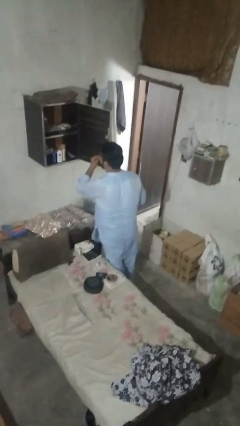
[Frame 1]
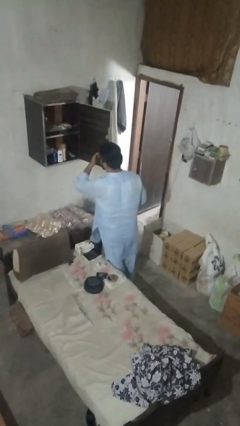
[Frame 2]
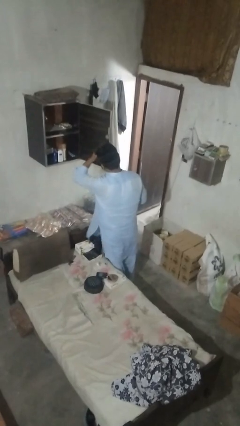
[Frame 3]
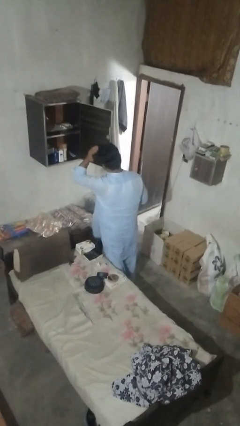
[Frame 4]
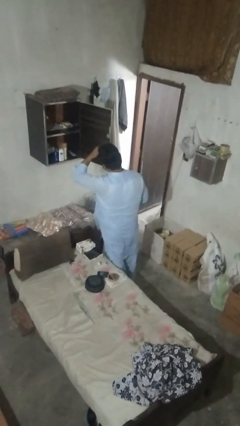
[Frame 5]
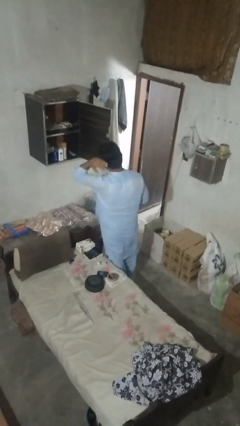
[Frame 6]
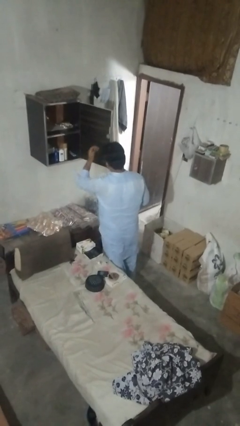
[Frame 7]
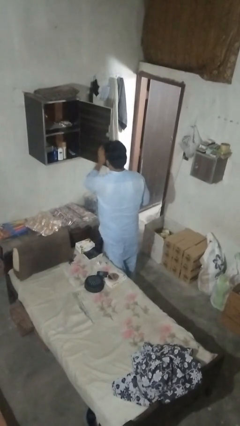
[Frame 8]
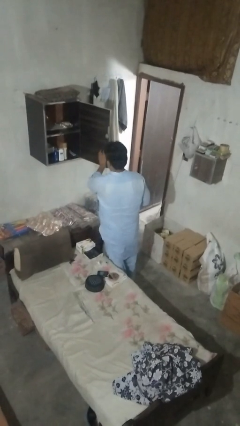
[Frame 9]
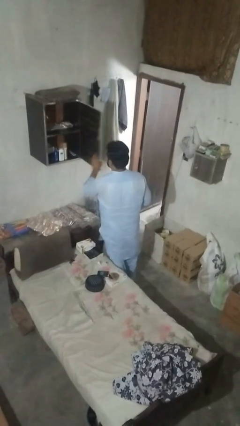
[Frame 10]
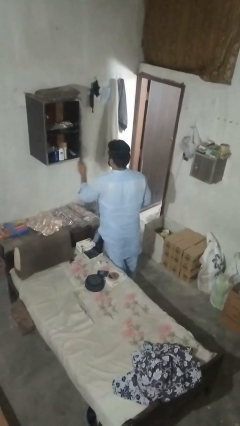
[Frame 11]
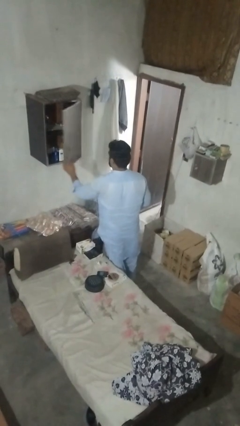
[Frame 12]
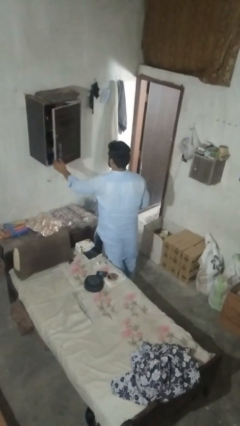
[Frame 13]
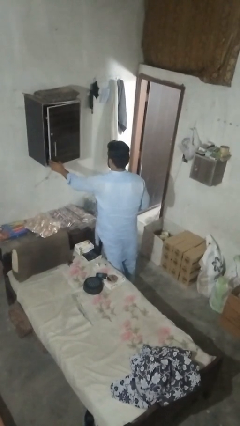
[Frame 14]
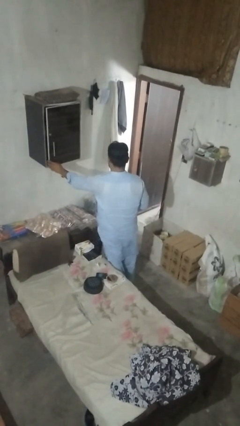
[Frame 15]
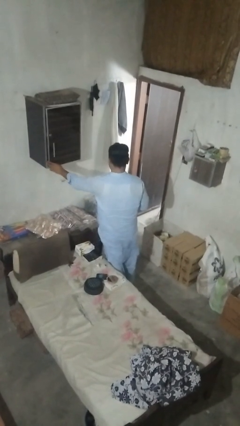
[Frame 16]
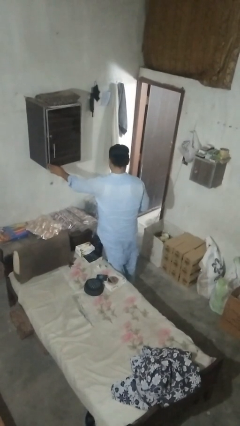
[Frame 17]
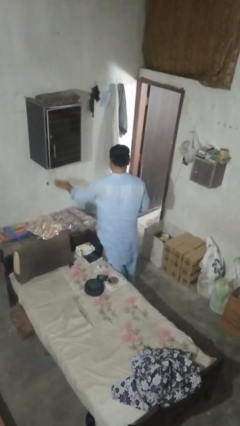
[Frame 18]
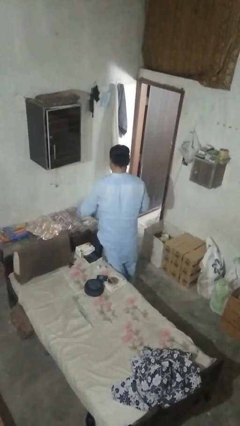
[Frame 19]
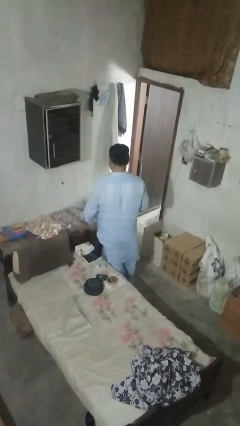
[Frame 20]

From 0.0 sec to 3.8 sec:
person closes dresser drawer

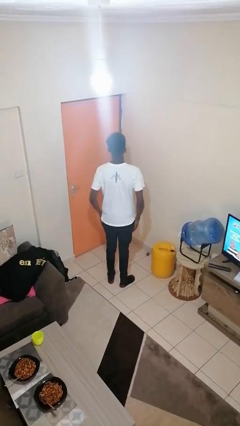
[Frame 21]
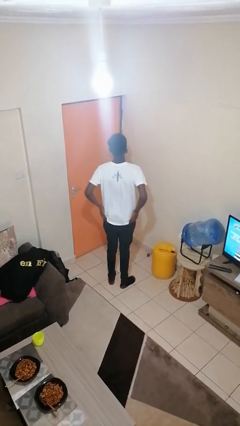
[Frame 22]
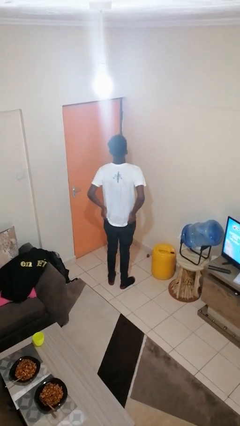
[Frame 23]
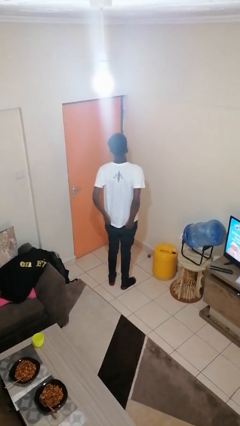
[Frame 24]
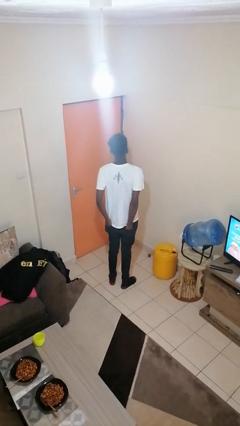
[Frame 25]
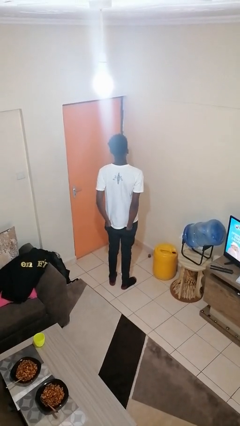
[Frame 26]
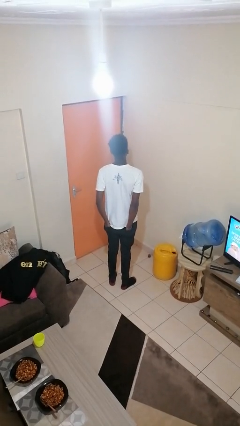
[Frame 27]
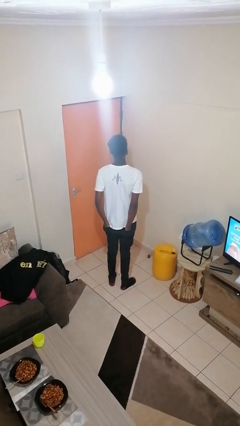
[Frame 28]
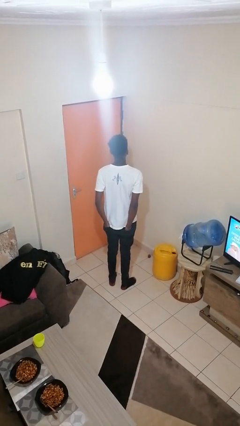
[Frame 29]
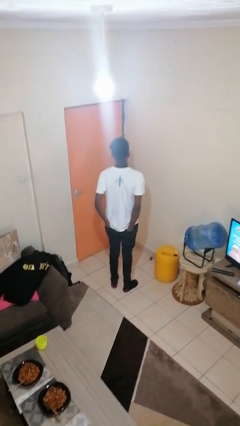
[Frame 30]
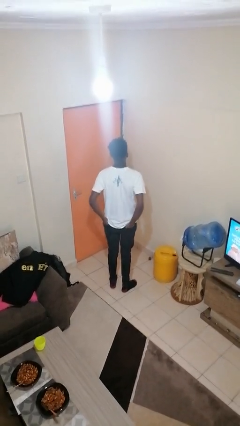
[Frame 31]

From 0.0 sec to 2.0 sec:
person puts hands in back pockets

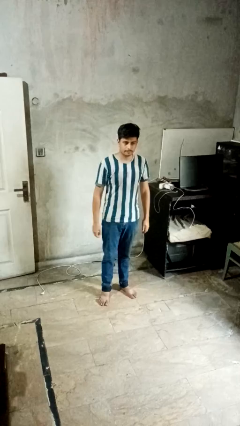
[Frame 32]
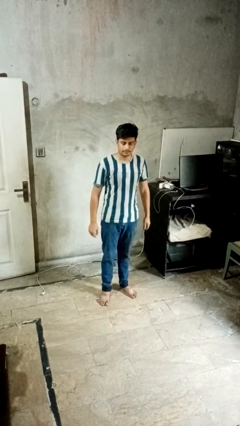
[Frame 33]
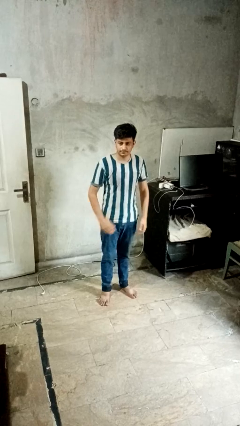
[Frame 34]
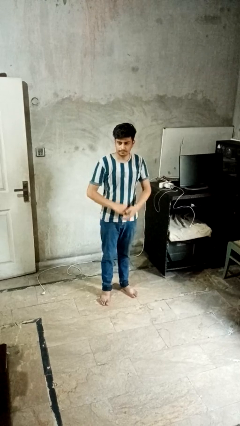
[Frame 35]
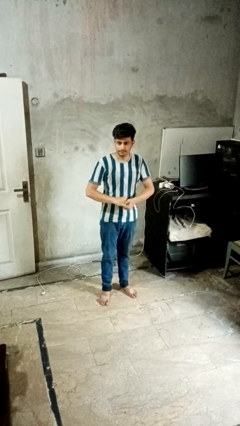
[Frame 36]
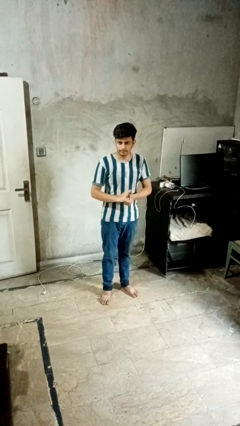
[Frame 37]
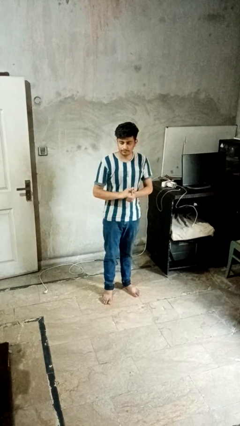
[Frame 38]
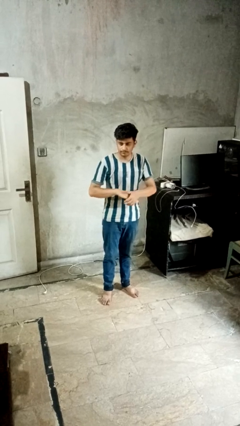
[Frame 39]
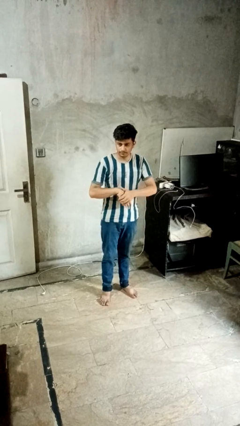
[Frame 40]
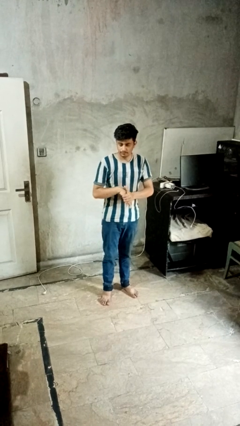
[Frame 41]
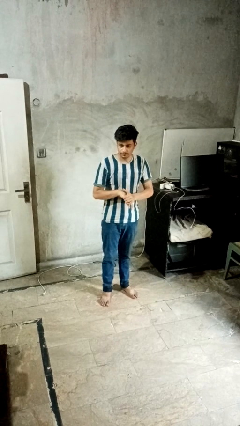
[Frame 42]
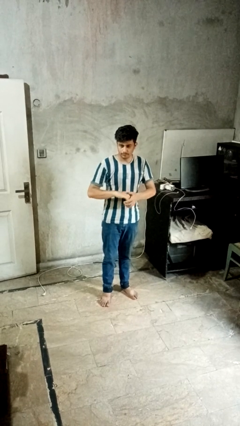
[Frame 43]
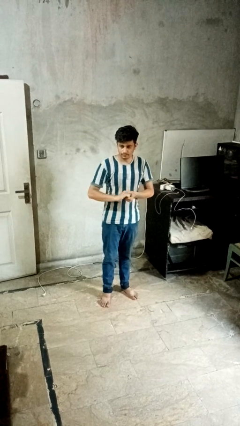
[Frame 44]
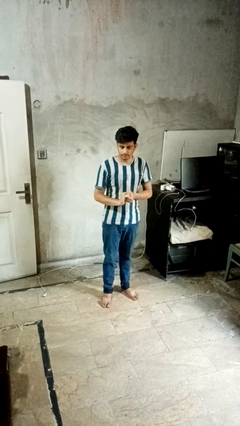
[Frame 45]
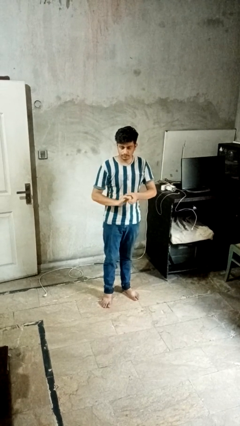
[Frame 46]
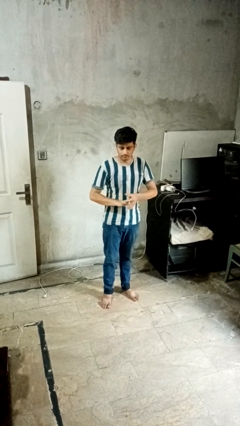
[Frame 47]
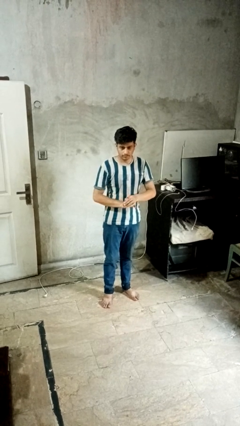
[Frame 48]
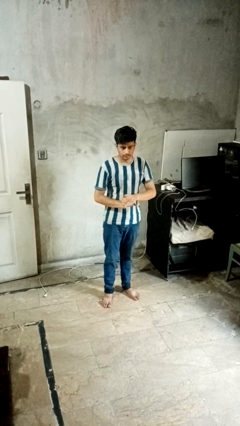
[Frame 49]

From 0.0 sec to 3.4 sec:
person cracks knuckles

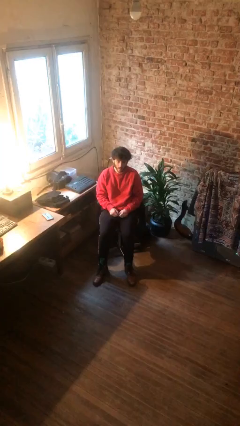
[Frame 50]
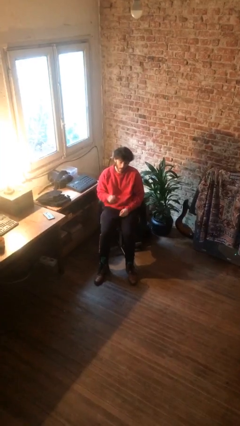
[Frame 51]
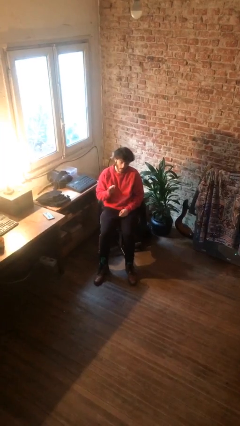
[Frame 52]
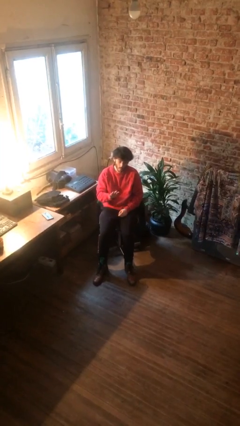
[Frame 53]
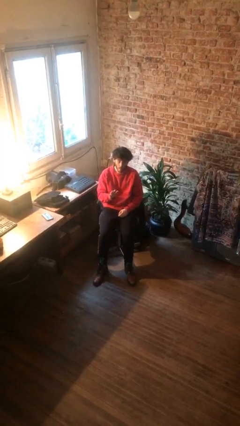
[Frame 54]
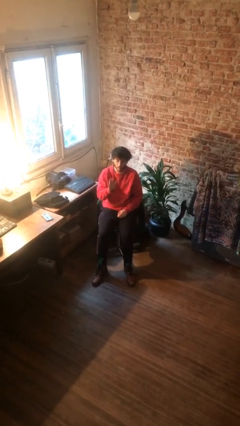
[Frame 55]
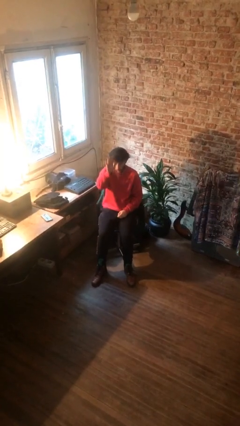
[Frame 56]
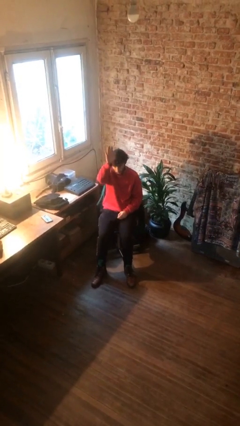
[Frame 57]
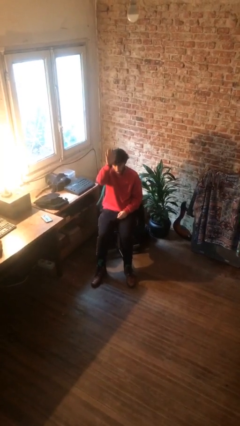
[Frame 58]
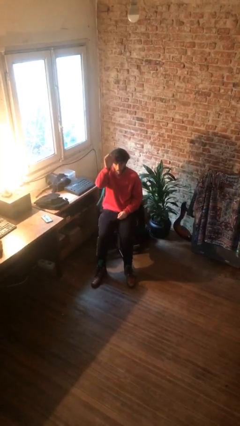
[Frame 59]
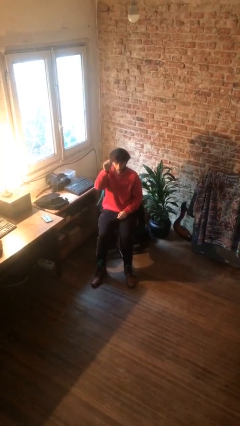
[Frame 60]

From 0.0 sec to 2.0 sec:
person gestures swipe up

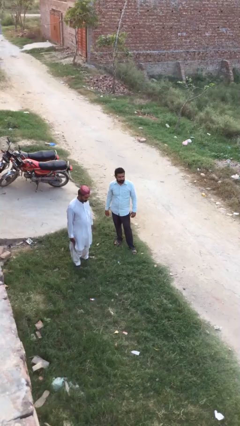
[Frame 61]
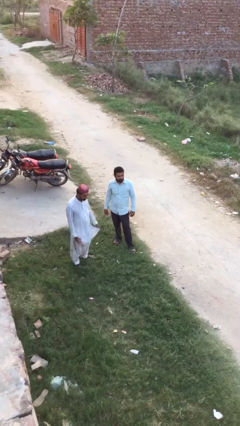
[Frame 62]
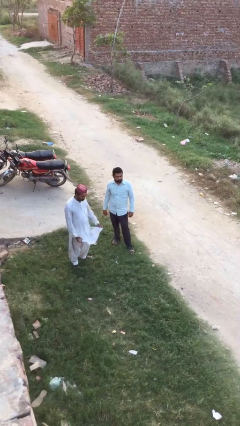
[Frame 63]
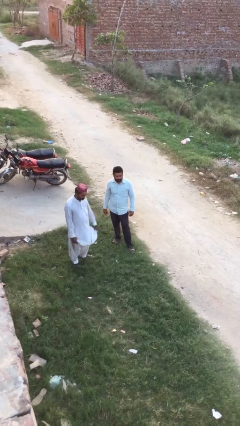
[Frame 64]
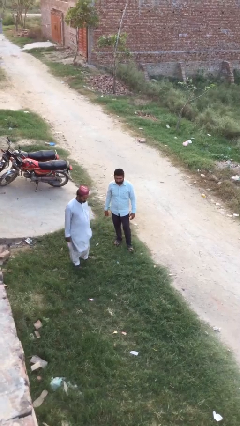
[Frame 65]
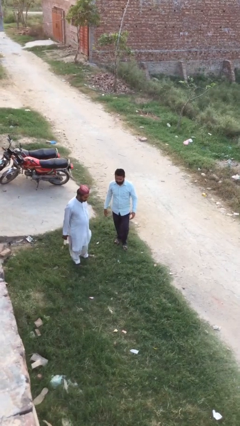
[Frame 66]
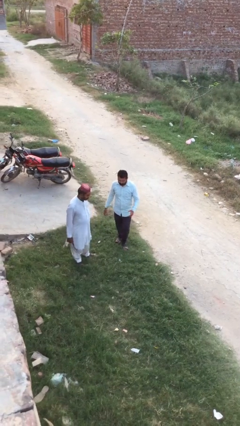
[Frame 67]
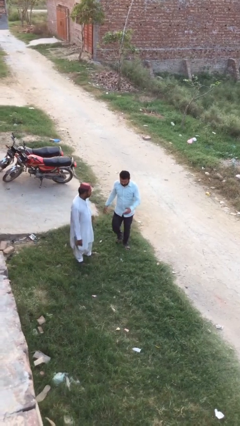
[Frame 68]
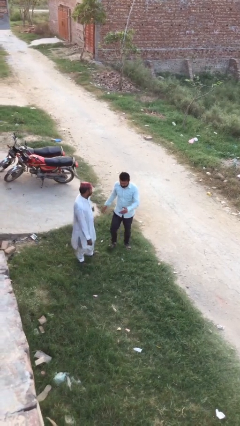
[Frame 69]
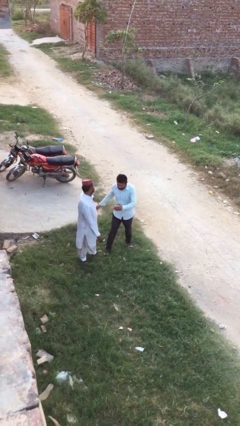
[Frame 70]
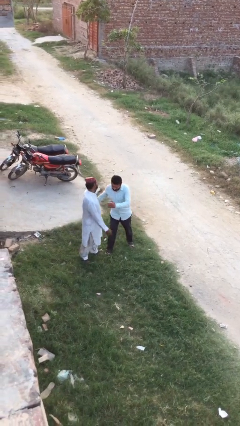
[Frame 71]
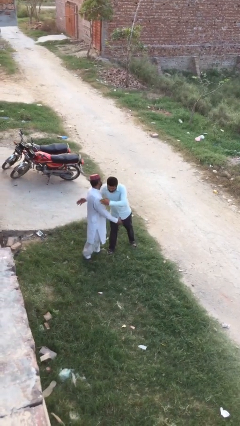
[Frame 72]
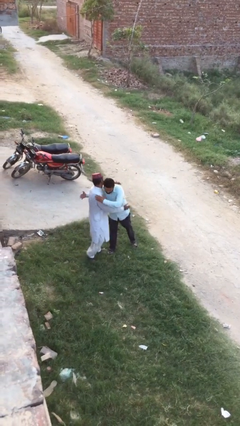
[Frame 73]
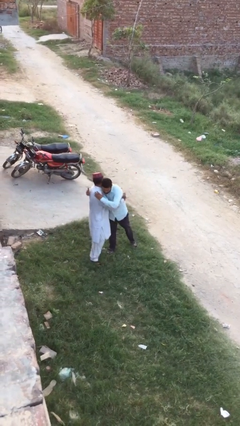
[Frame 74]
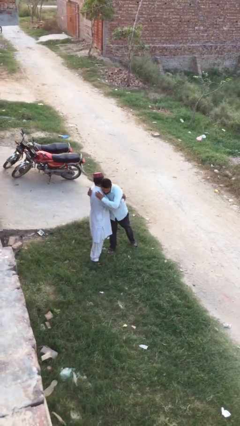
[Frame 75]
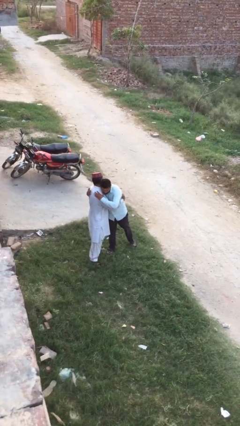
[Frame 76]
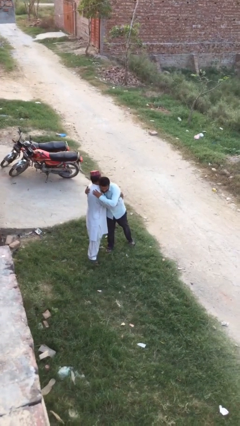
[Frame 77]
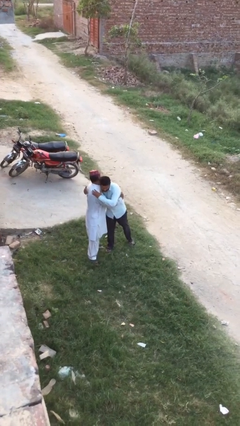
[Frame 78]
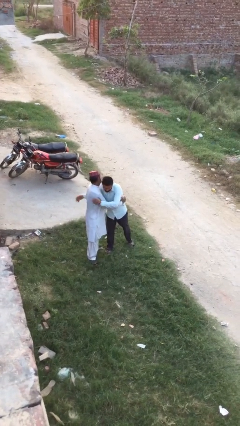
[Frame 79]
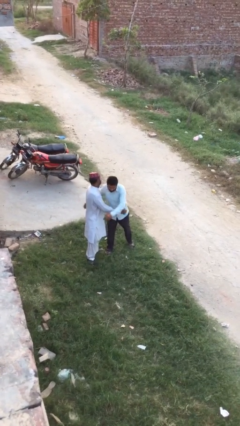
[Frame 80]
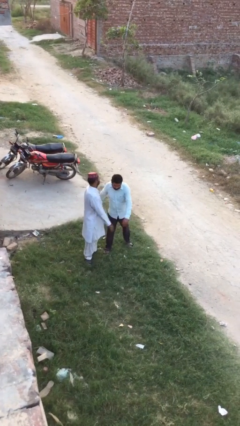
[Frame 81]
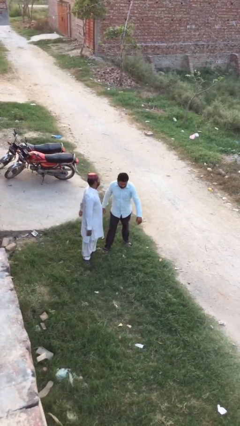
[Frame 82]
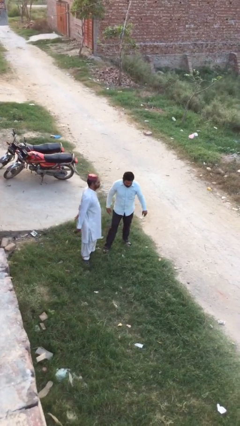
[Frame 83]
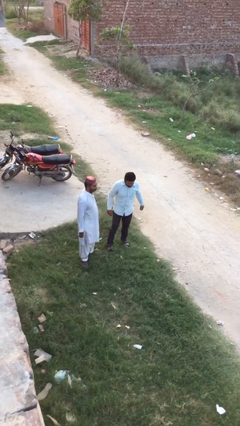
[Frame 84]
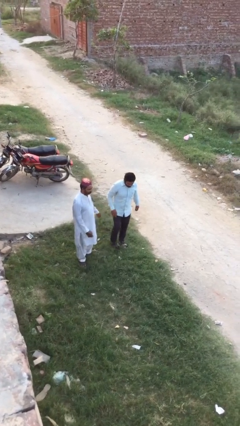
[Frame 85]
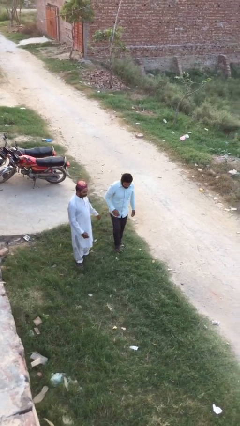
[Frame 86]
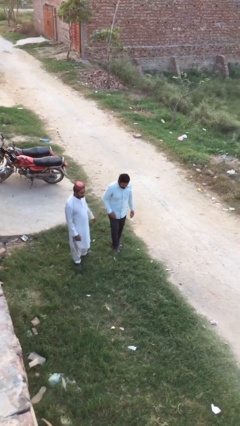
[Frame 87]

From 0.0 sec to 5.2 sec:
person embraces person

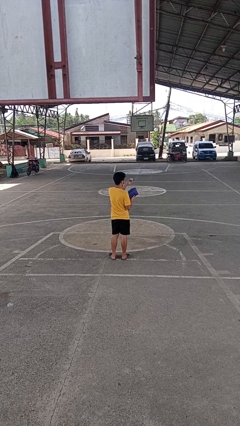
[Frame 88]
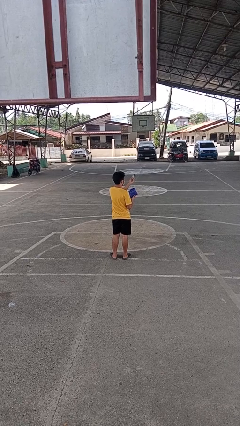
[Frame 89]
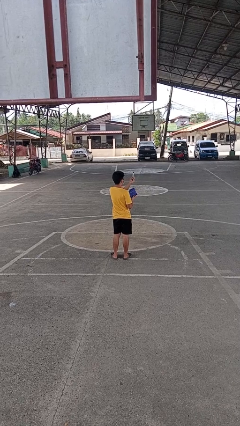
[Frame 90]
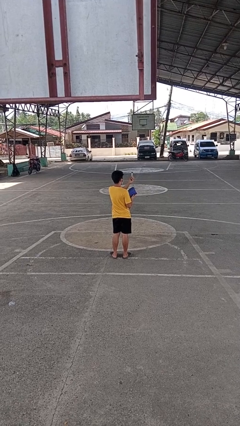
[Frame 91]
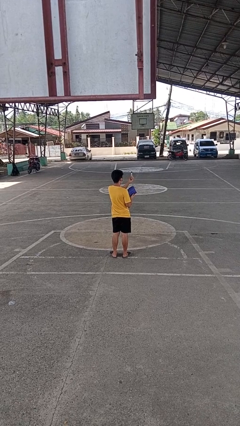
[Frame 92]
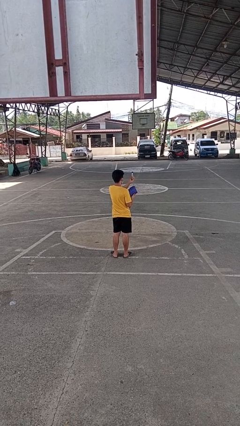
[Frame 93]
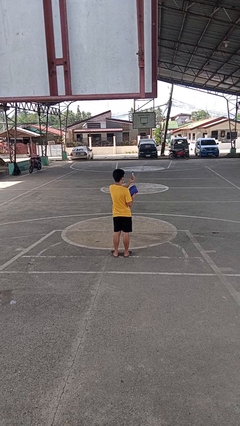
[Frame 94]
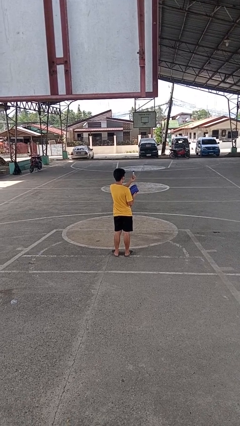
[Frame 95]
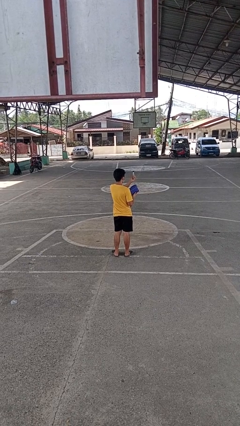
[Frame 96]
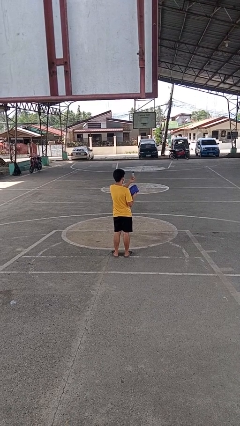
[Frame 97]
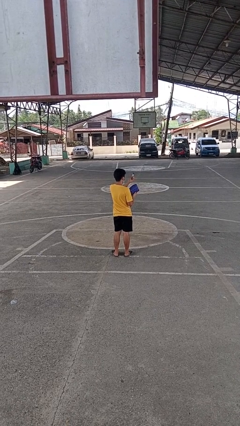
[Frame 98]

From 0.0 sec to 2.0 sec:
person takes object from purse
